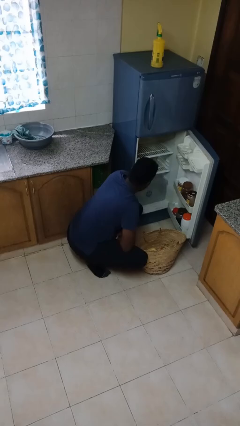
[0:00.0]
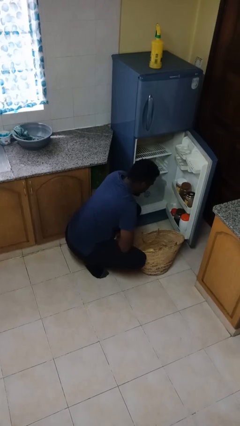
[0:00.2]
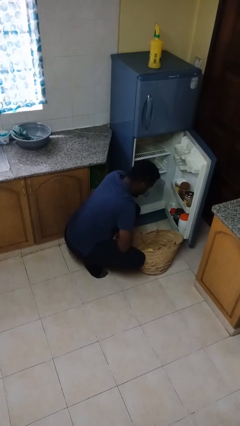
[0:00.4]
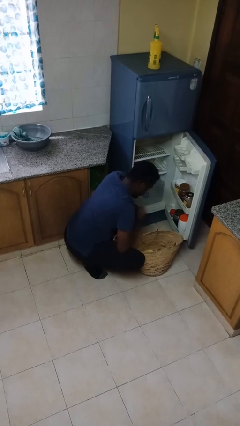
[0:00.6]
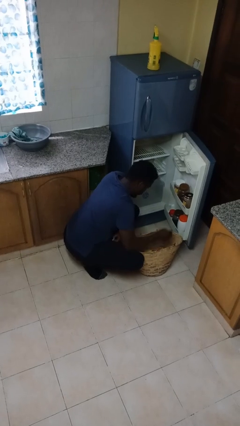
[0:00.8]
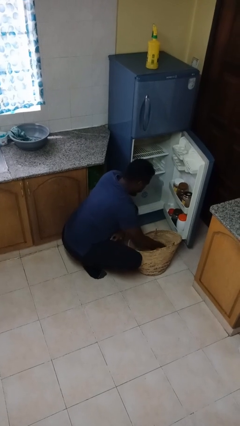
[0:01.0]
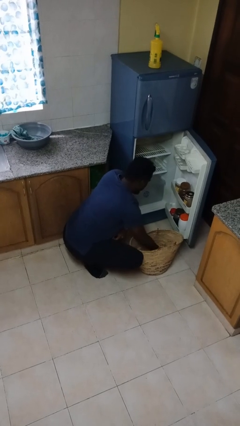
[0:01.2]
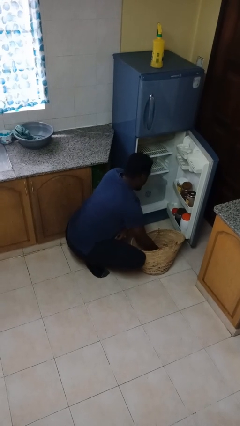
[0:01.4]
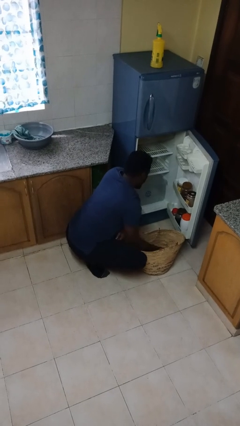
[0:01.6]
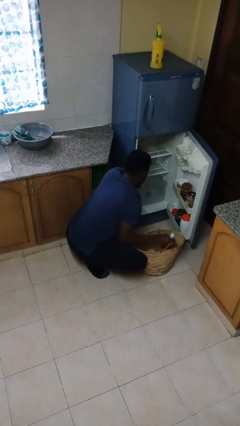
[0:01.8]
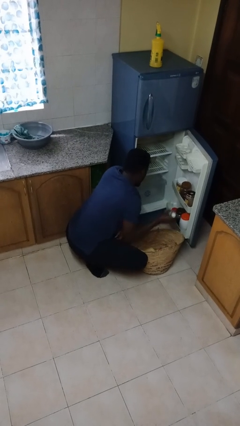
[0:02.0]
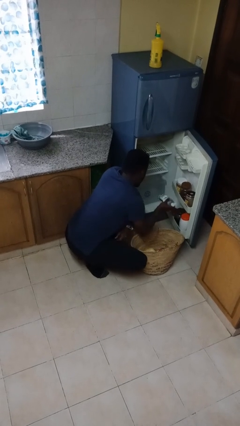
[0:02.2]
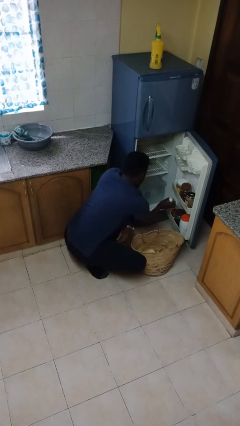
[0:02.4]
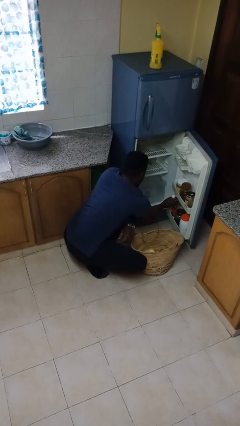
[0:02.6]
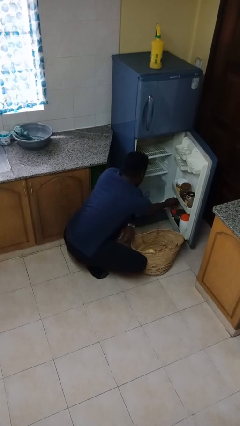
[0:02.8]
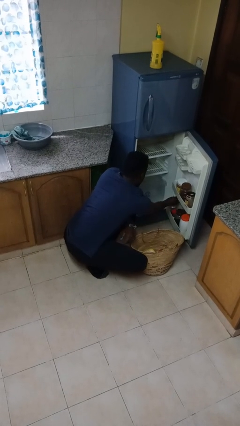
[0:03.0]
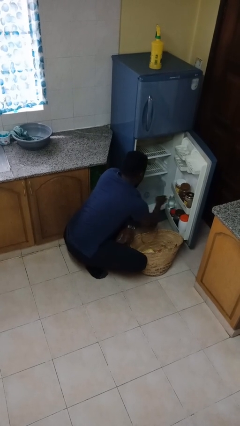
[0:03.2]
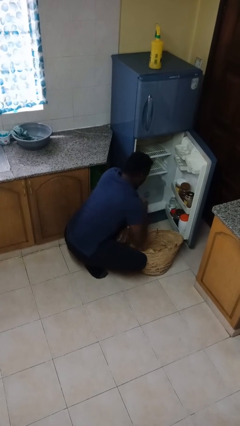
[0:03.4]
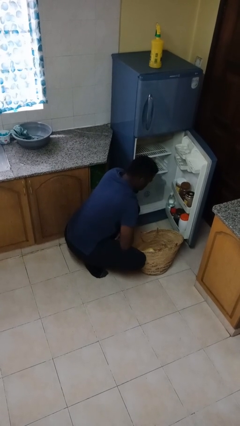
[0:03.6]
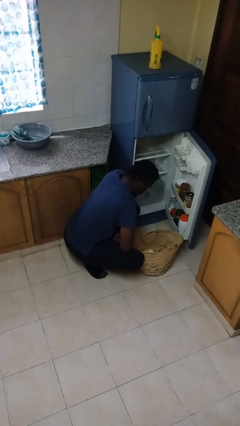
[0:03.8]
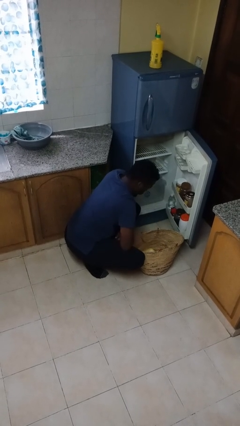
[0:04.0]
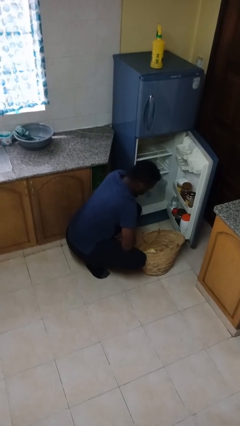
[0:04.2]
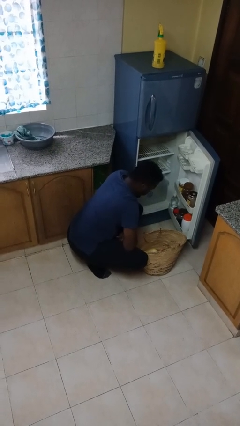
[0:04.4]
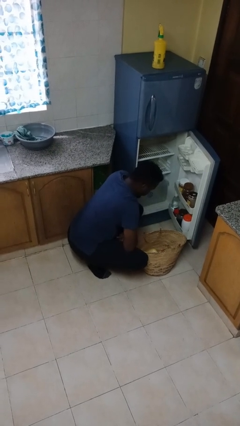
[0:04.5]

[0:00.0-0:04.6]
person loads groceries into refrigerator

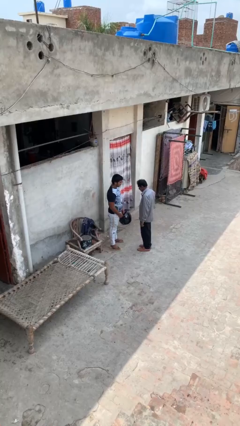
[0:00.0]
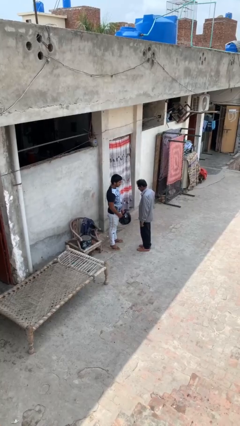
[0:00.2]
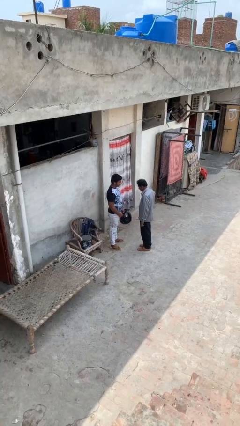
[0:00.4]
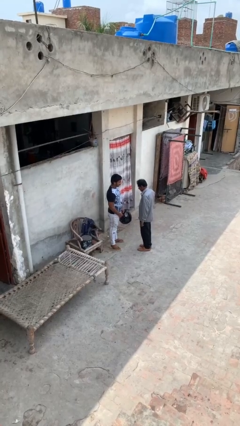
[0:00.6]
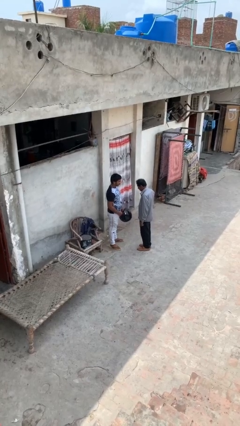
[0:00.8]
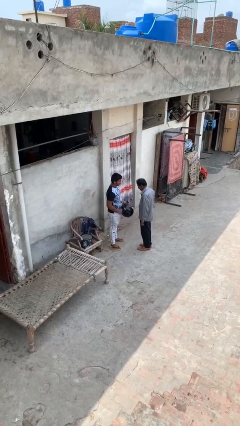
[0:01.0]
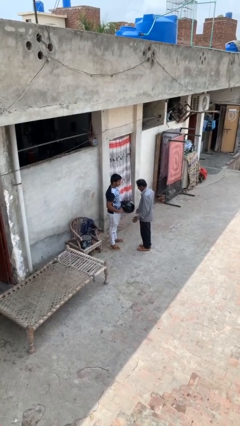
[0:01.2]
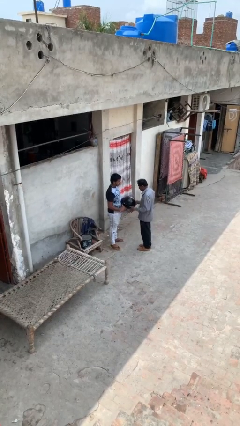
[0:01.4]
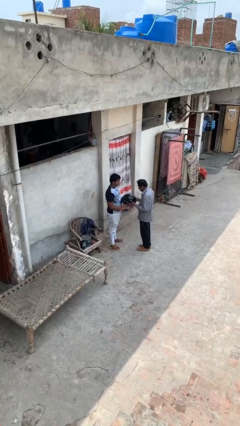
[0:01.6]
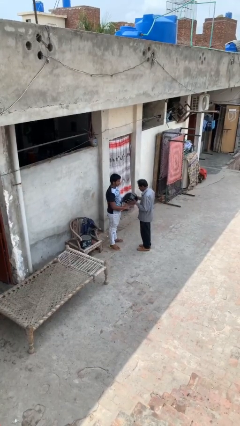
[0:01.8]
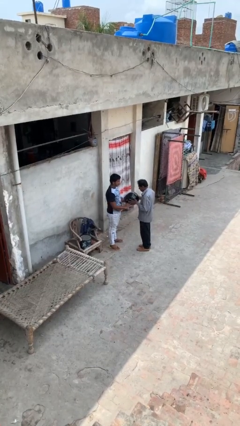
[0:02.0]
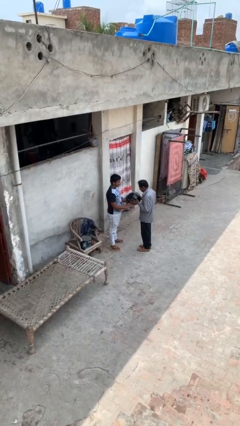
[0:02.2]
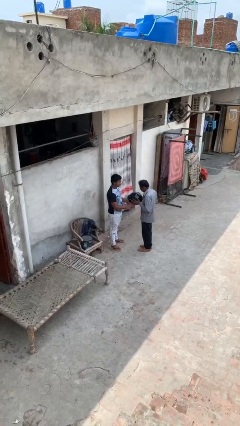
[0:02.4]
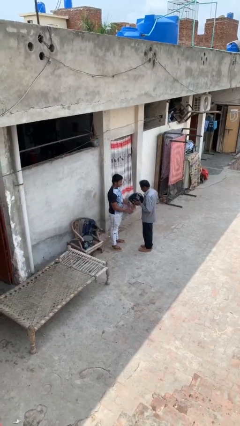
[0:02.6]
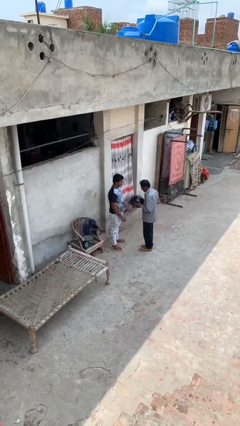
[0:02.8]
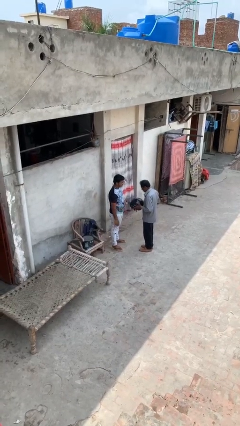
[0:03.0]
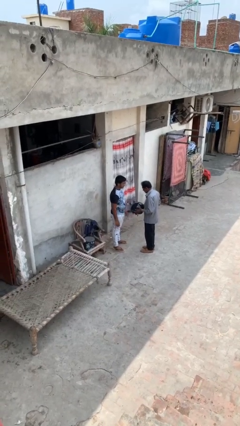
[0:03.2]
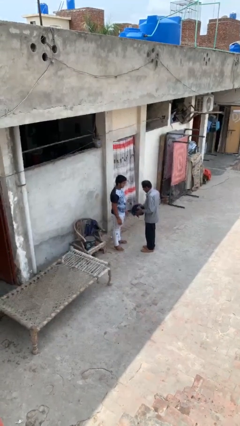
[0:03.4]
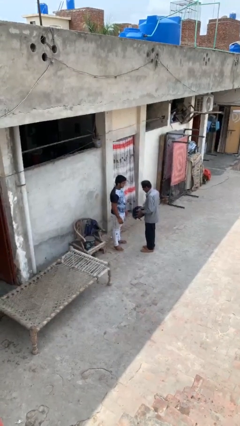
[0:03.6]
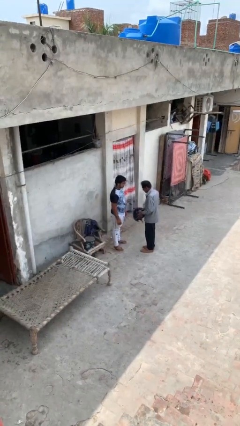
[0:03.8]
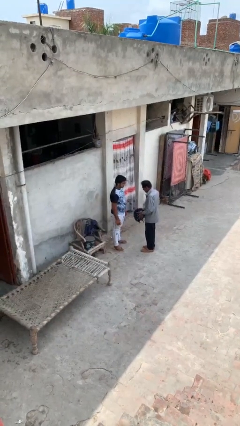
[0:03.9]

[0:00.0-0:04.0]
person transfers object to person

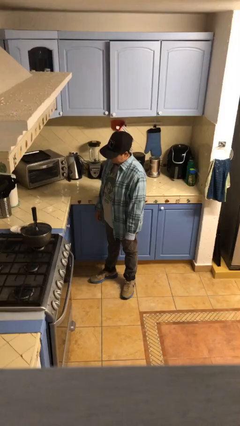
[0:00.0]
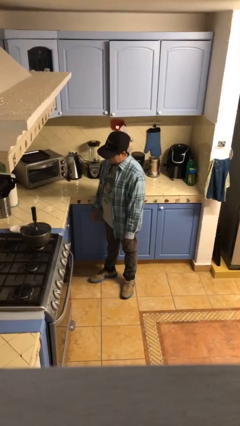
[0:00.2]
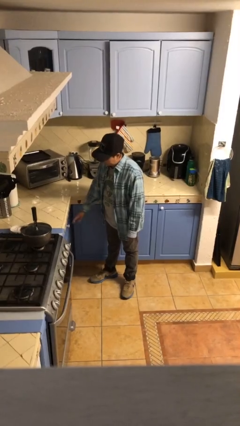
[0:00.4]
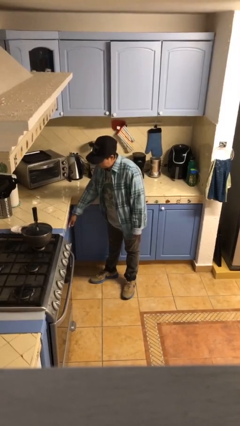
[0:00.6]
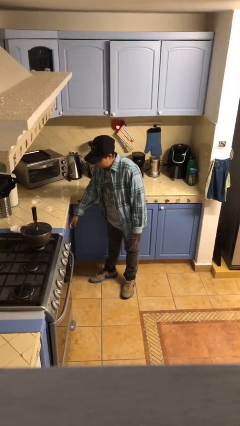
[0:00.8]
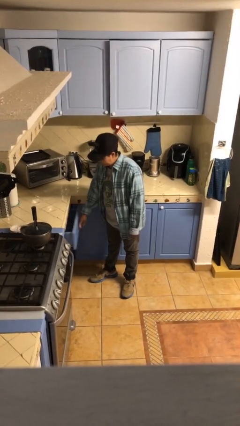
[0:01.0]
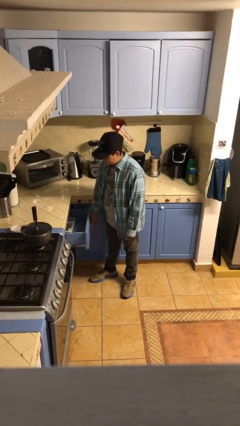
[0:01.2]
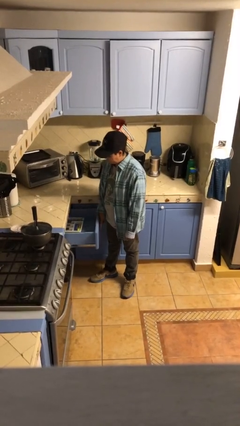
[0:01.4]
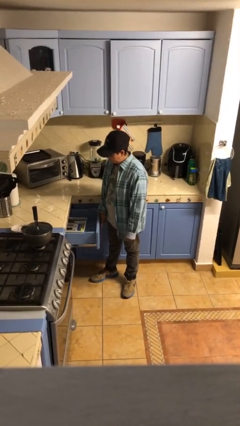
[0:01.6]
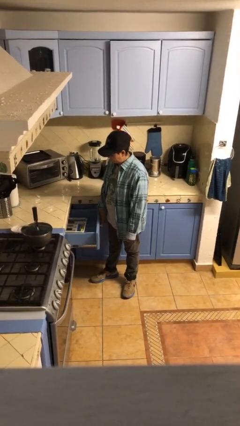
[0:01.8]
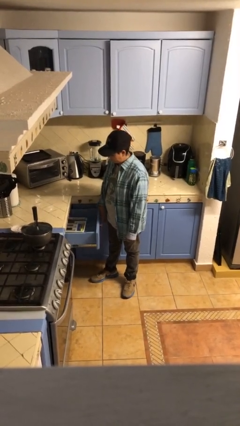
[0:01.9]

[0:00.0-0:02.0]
person opens kitchen drawer

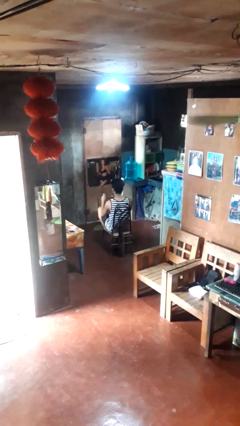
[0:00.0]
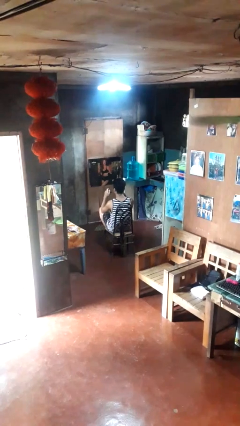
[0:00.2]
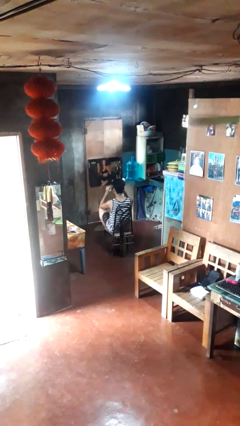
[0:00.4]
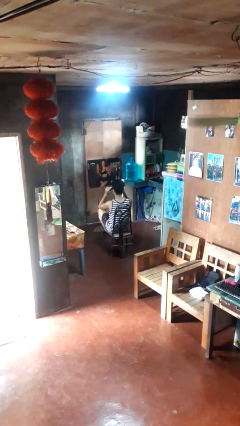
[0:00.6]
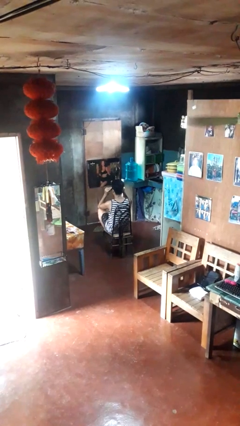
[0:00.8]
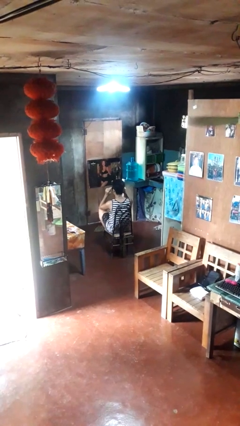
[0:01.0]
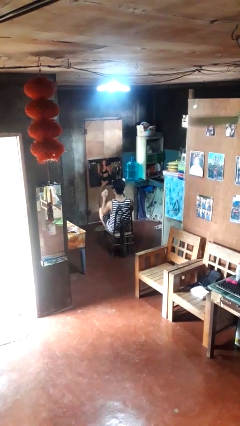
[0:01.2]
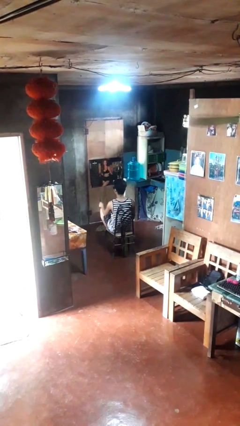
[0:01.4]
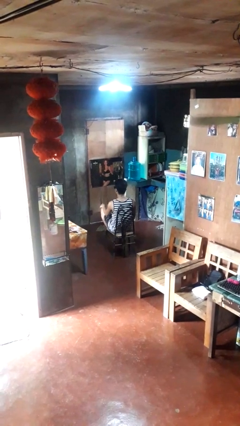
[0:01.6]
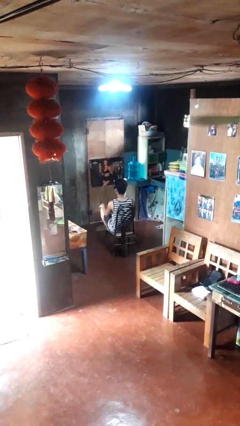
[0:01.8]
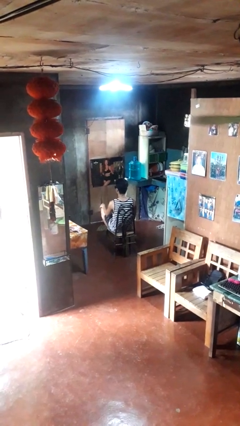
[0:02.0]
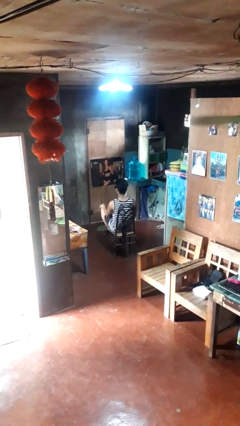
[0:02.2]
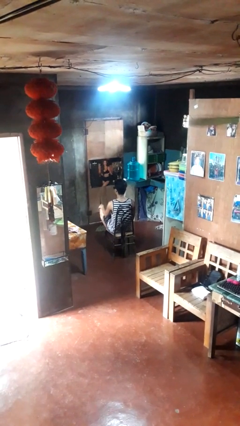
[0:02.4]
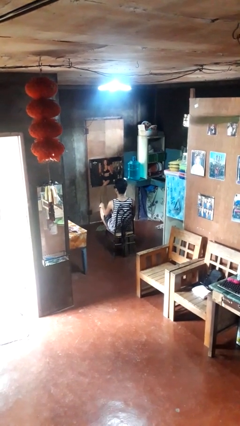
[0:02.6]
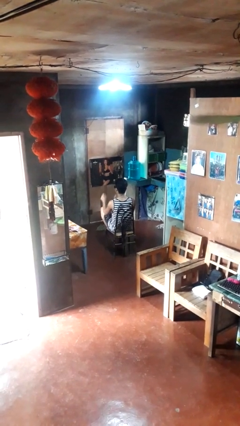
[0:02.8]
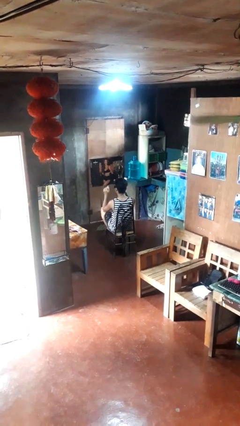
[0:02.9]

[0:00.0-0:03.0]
person puts on sunglasses

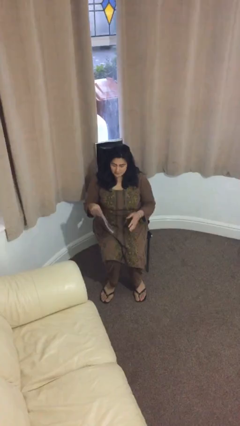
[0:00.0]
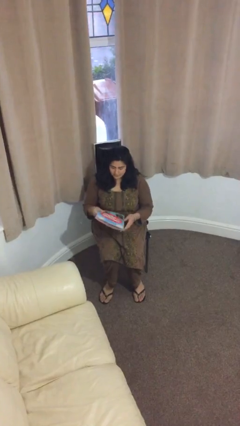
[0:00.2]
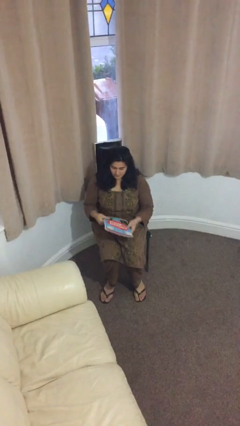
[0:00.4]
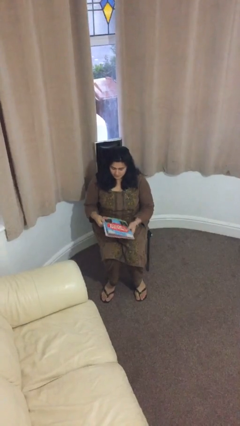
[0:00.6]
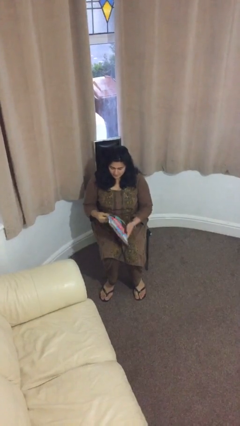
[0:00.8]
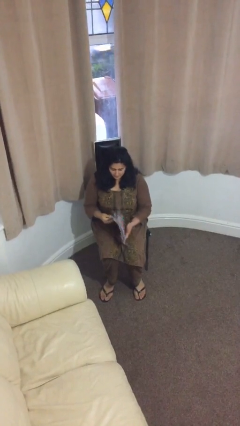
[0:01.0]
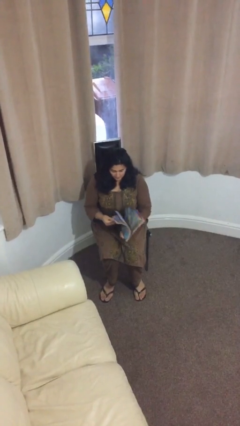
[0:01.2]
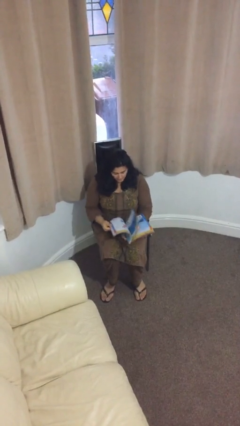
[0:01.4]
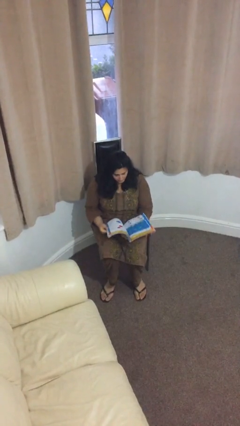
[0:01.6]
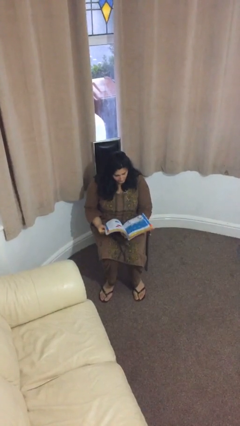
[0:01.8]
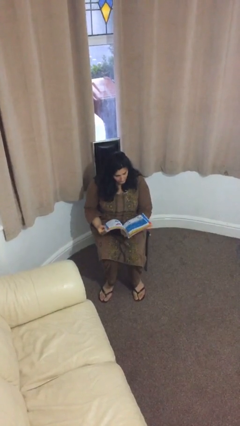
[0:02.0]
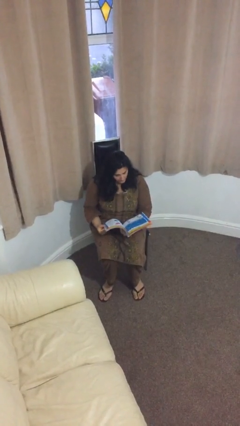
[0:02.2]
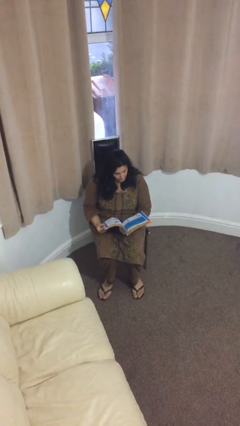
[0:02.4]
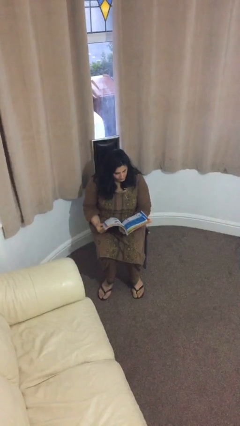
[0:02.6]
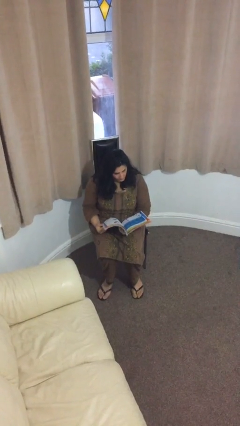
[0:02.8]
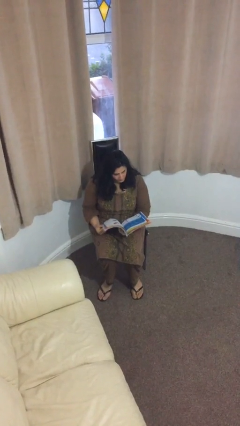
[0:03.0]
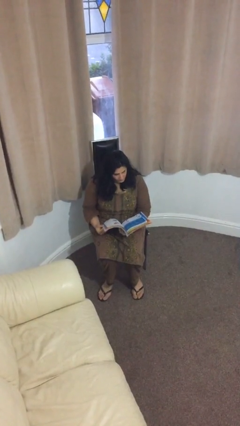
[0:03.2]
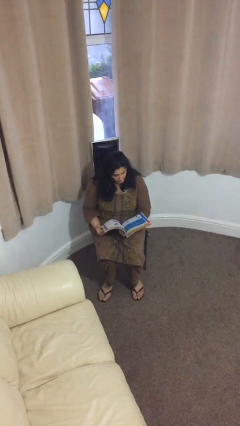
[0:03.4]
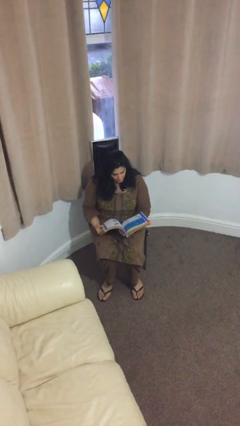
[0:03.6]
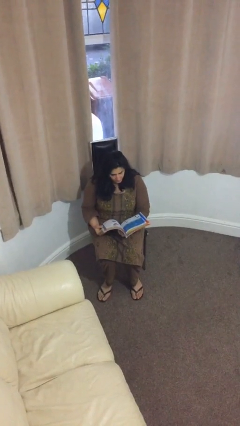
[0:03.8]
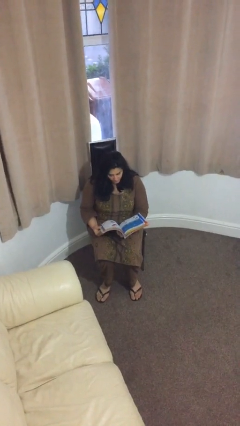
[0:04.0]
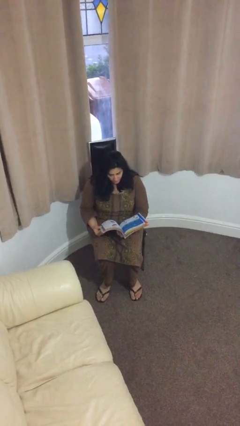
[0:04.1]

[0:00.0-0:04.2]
person reads document
